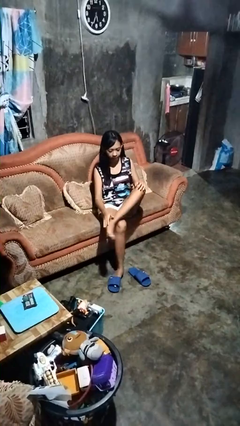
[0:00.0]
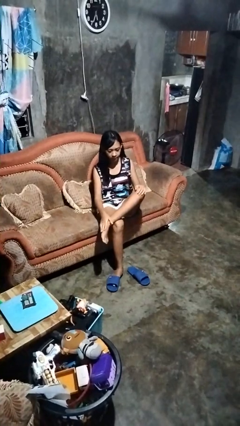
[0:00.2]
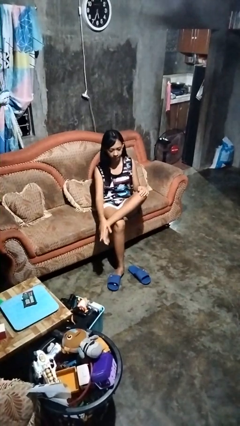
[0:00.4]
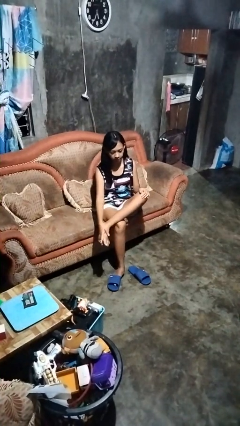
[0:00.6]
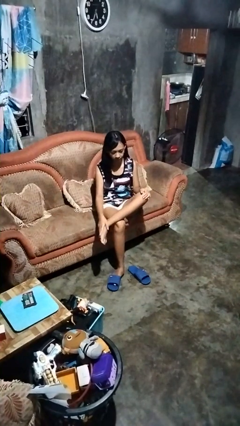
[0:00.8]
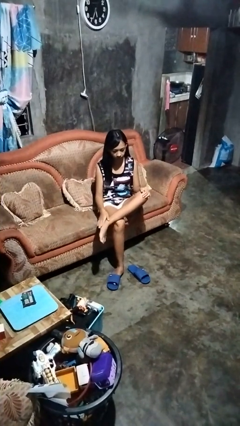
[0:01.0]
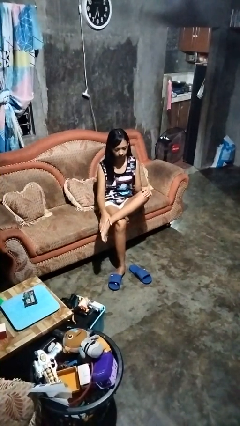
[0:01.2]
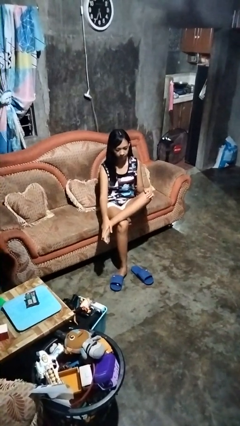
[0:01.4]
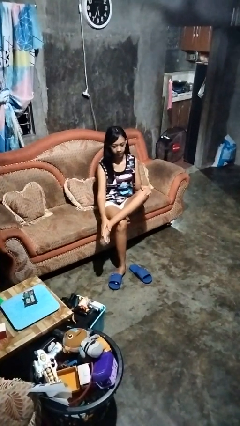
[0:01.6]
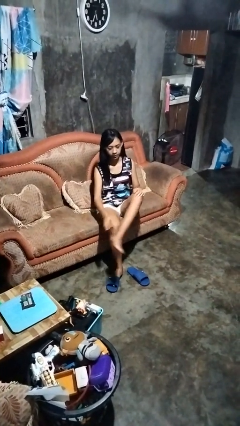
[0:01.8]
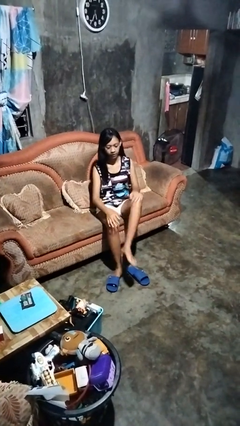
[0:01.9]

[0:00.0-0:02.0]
person rubs foot

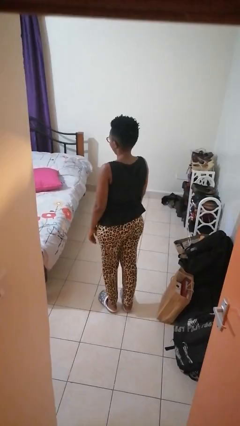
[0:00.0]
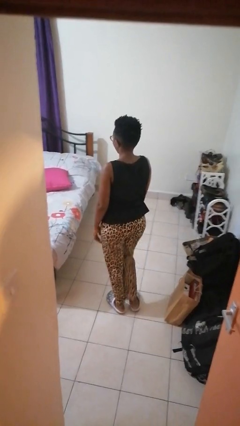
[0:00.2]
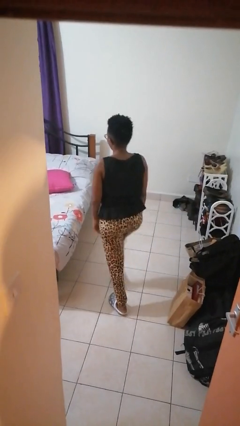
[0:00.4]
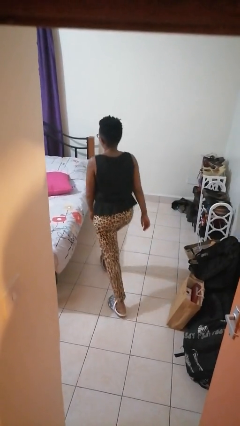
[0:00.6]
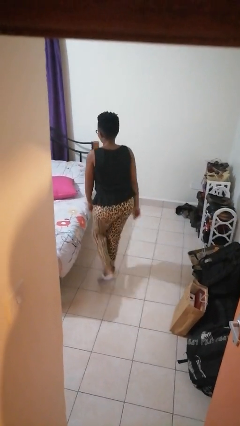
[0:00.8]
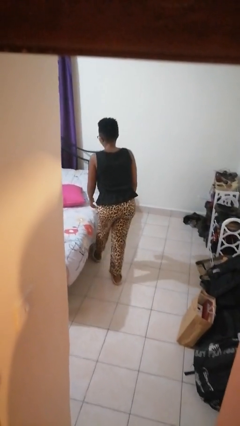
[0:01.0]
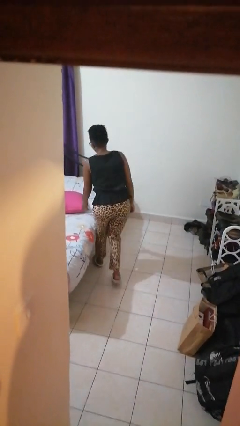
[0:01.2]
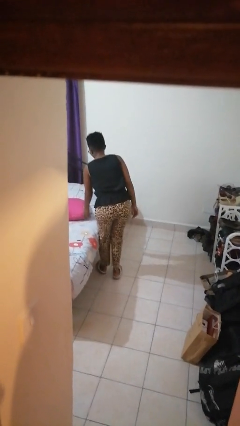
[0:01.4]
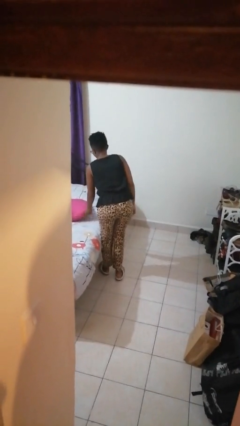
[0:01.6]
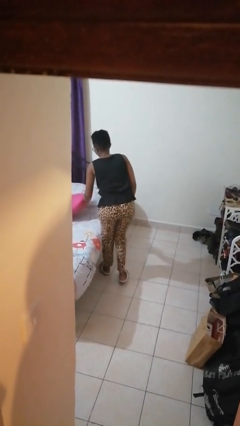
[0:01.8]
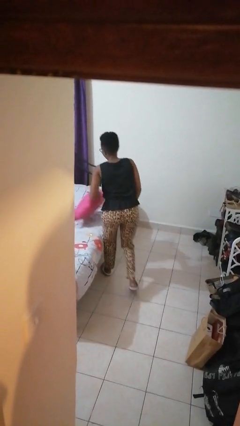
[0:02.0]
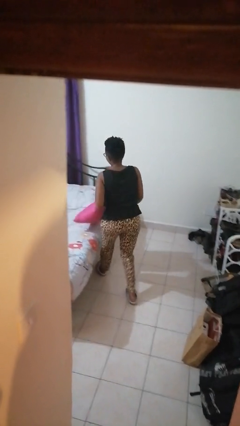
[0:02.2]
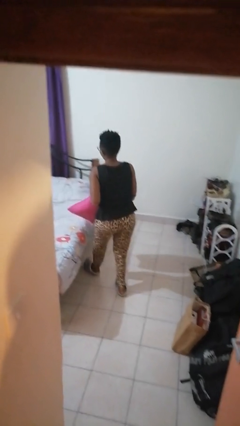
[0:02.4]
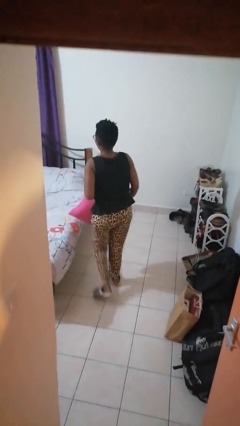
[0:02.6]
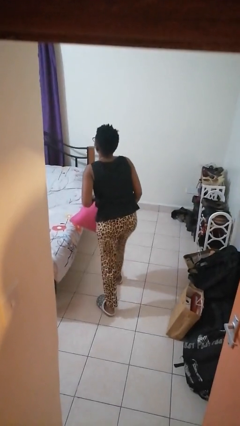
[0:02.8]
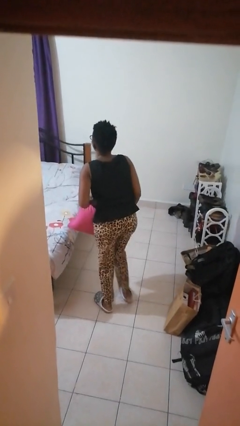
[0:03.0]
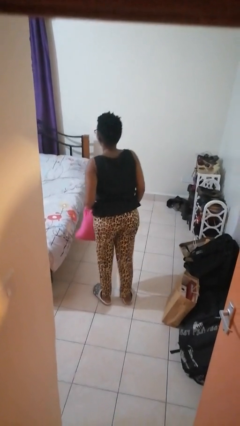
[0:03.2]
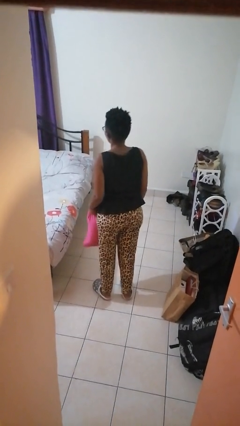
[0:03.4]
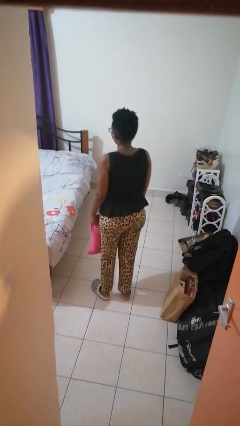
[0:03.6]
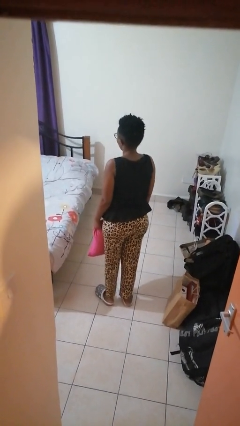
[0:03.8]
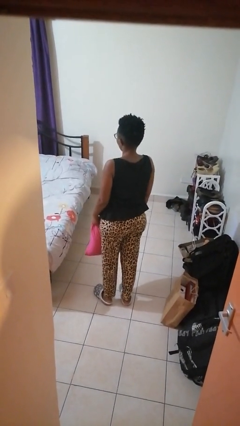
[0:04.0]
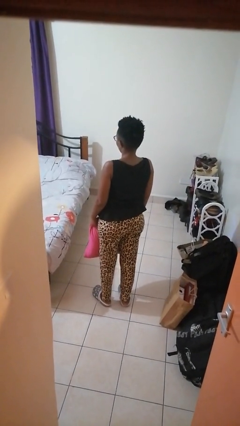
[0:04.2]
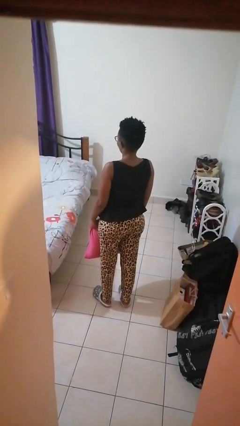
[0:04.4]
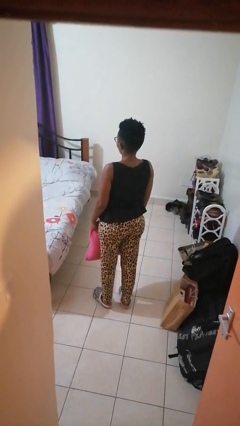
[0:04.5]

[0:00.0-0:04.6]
person picks up object from bed

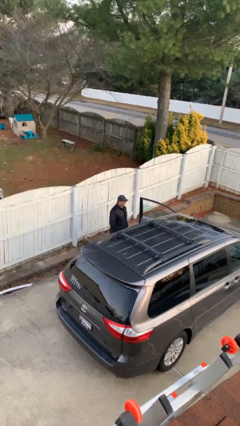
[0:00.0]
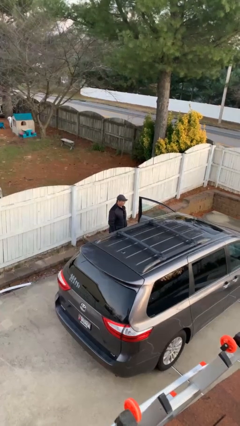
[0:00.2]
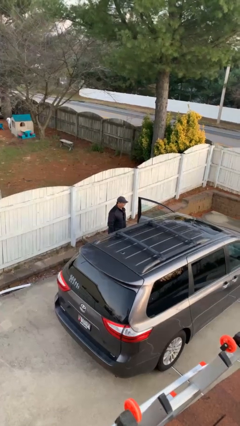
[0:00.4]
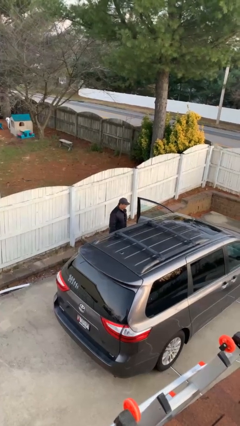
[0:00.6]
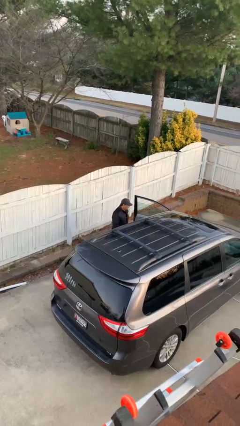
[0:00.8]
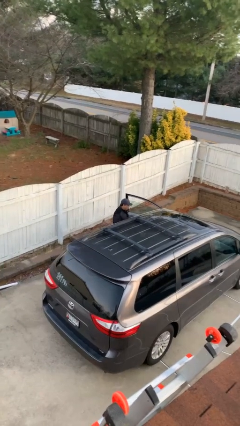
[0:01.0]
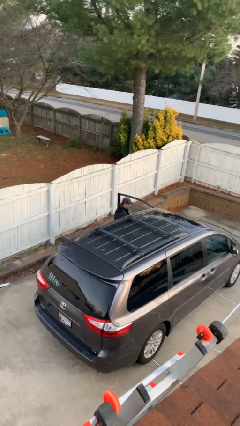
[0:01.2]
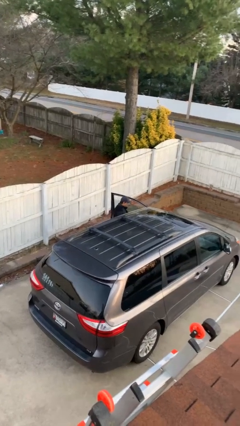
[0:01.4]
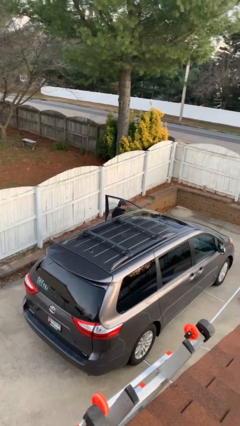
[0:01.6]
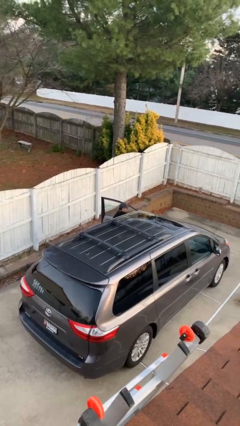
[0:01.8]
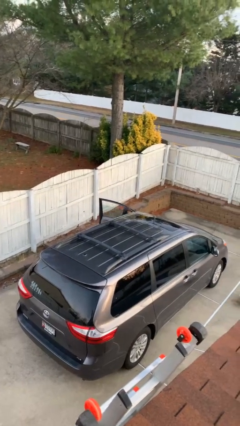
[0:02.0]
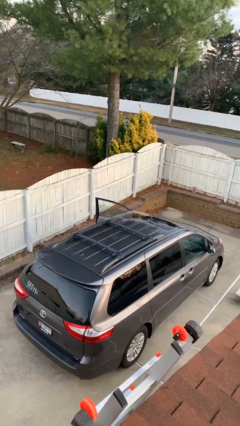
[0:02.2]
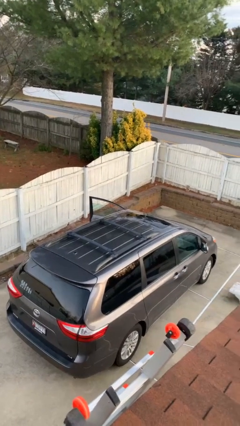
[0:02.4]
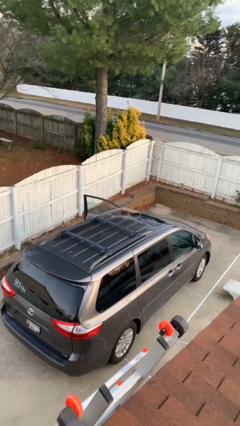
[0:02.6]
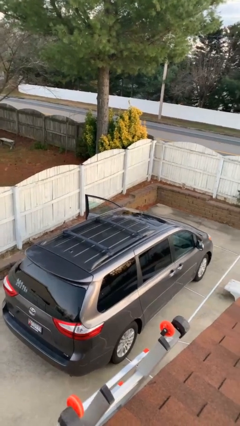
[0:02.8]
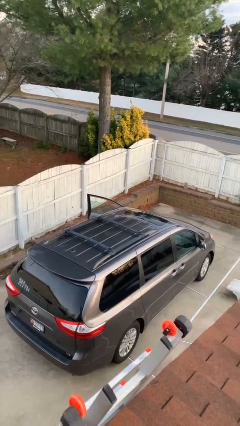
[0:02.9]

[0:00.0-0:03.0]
person enters car

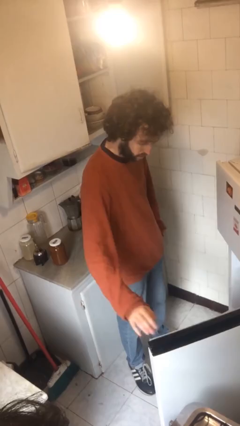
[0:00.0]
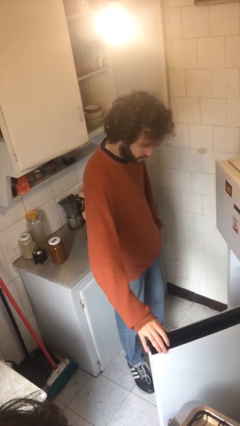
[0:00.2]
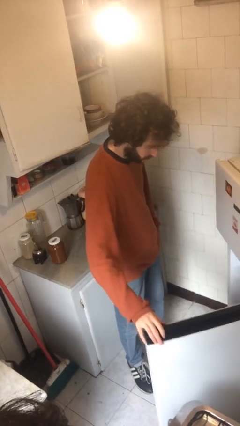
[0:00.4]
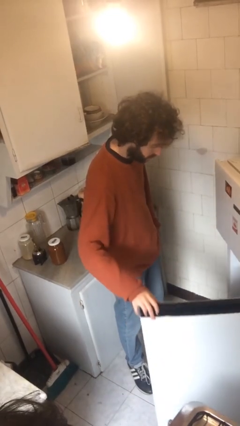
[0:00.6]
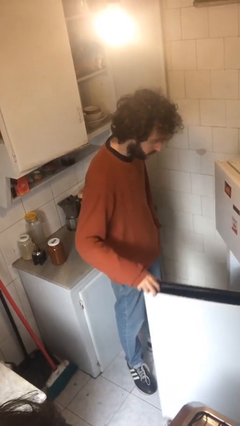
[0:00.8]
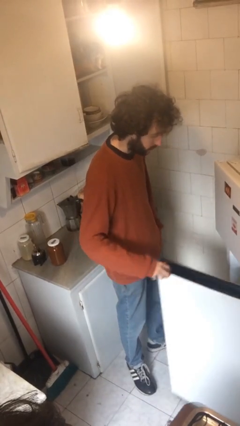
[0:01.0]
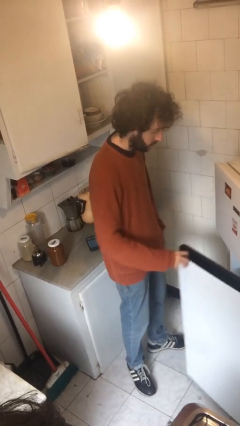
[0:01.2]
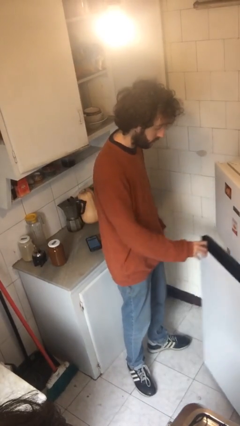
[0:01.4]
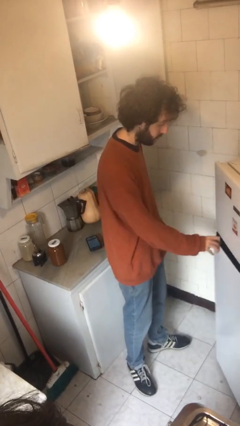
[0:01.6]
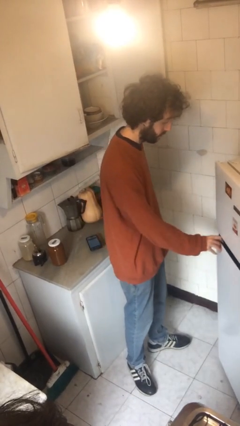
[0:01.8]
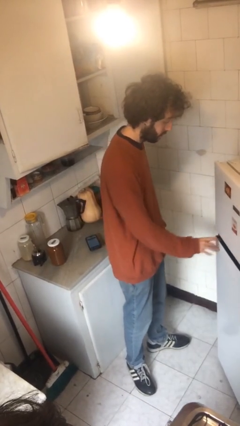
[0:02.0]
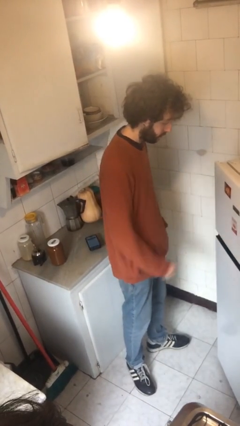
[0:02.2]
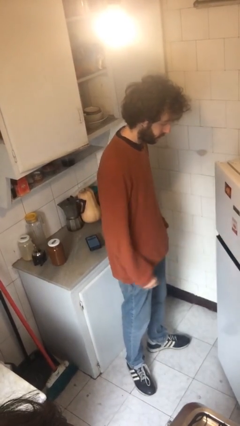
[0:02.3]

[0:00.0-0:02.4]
person closes refrigerator

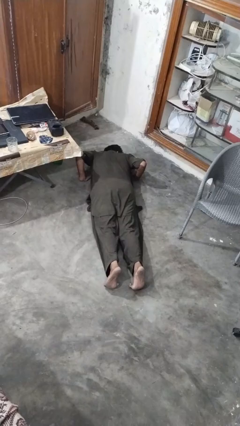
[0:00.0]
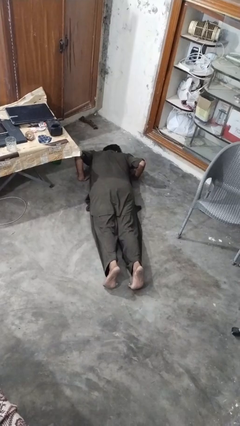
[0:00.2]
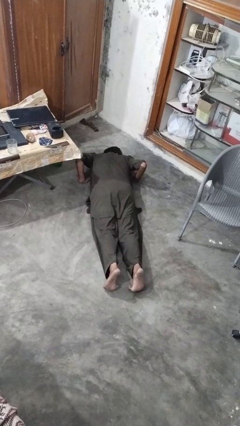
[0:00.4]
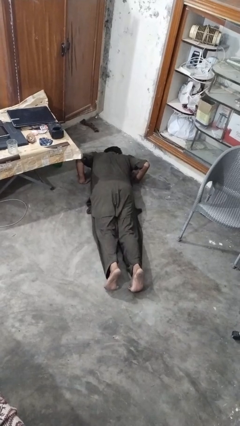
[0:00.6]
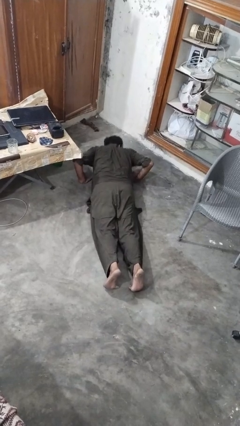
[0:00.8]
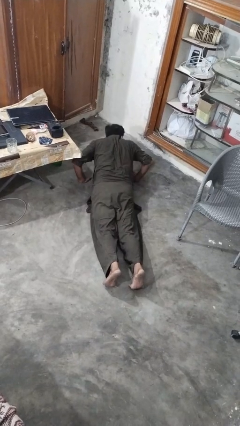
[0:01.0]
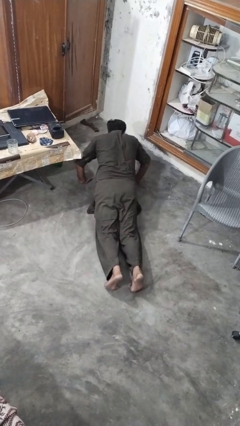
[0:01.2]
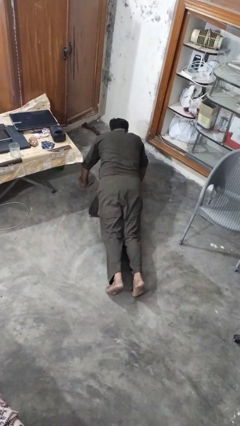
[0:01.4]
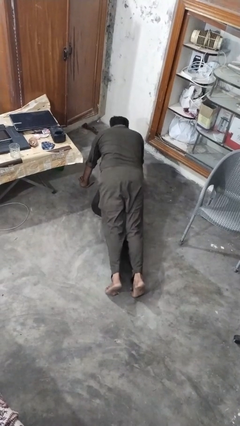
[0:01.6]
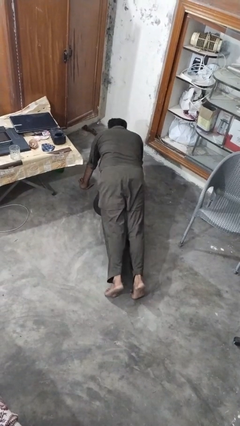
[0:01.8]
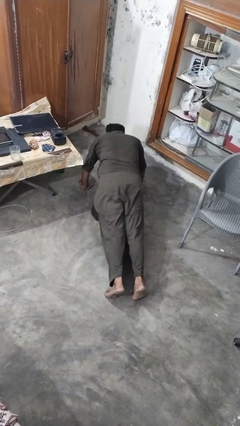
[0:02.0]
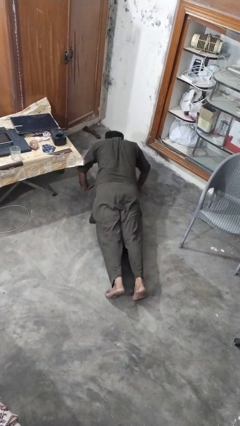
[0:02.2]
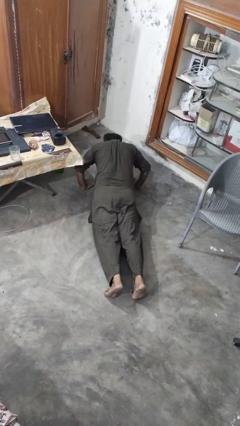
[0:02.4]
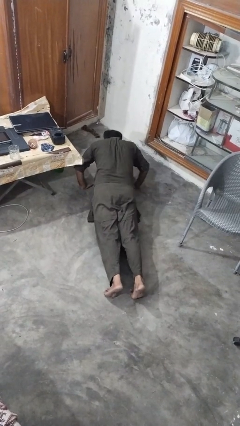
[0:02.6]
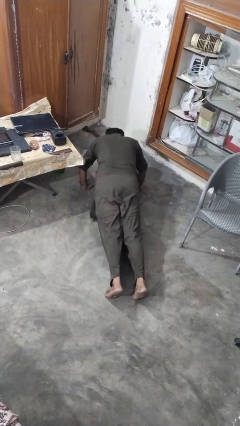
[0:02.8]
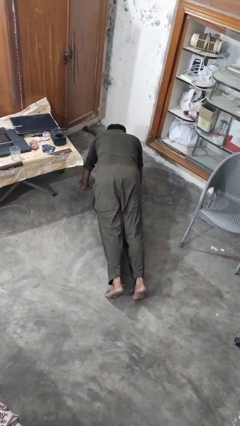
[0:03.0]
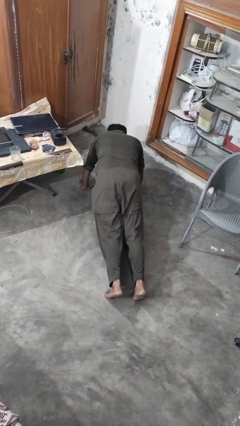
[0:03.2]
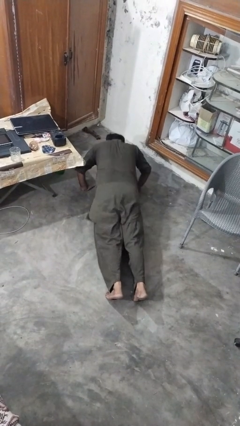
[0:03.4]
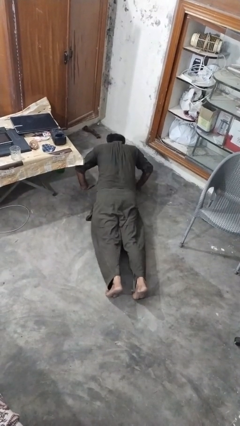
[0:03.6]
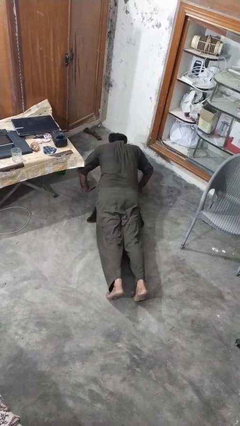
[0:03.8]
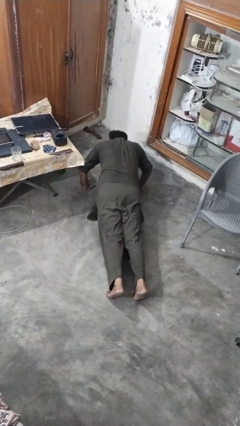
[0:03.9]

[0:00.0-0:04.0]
person exercises with pushup

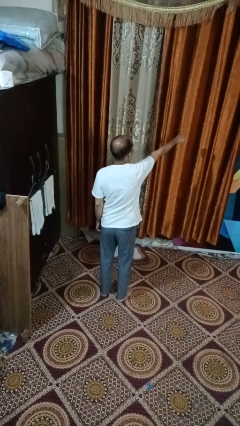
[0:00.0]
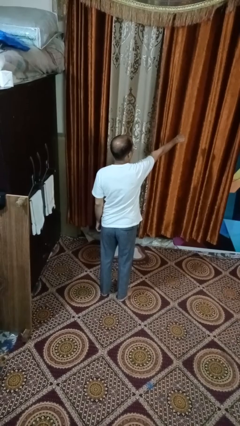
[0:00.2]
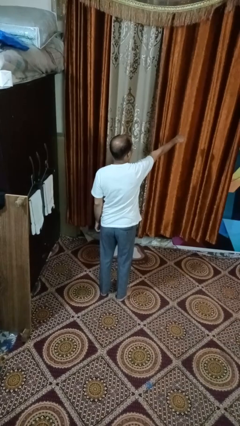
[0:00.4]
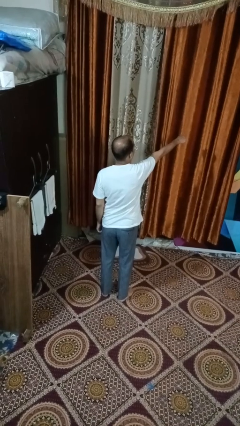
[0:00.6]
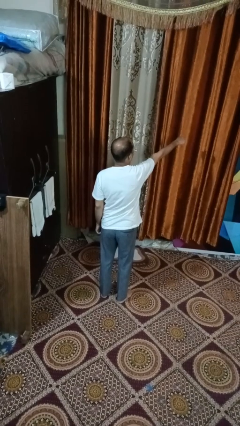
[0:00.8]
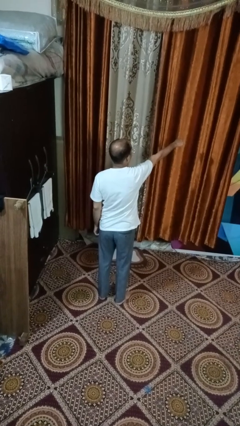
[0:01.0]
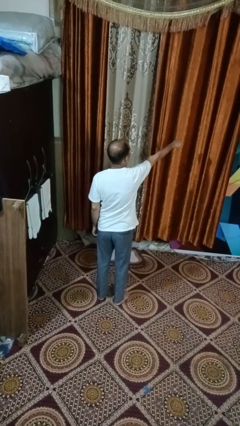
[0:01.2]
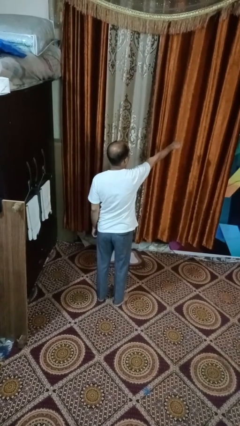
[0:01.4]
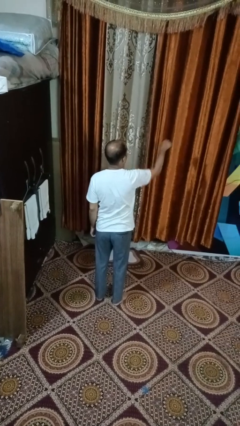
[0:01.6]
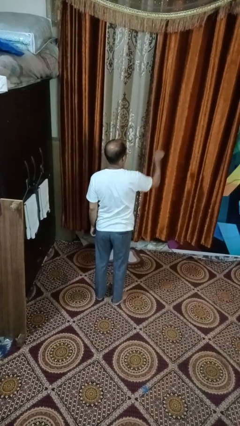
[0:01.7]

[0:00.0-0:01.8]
person punches
